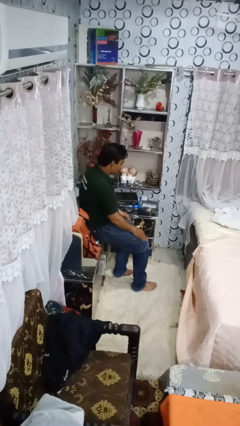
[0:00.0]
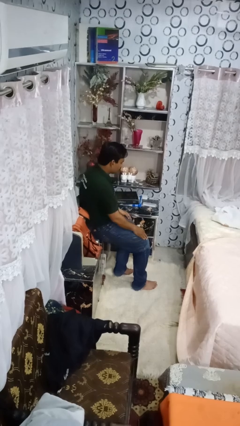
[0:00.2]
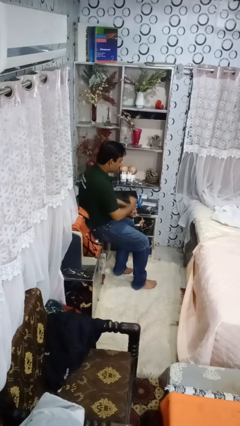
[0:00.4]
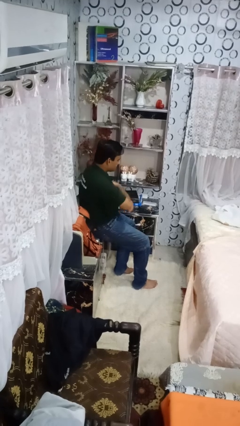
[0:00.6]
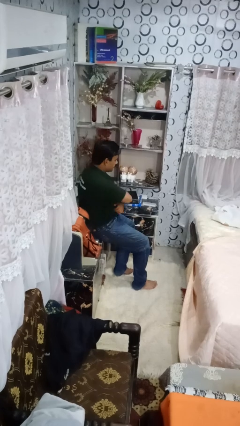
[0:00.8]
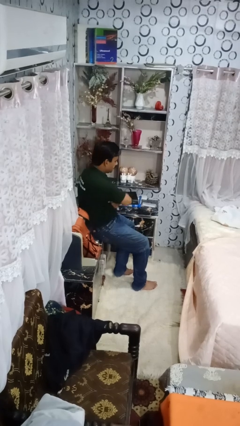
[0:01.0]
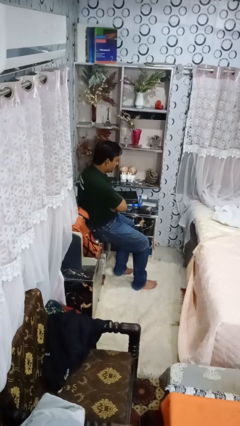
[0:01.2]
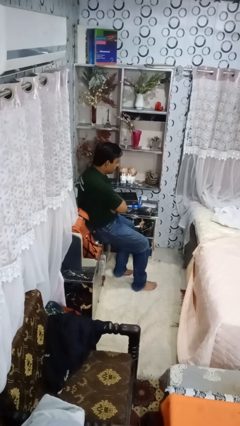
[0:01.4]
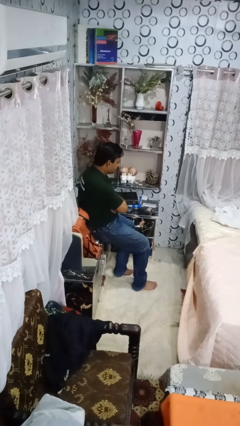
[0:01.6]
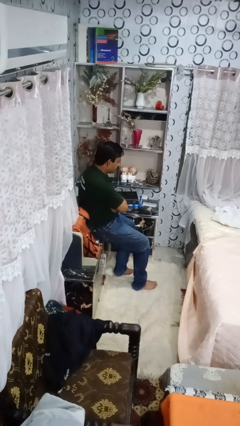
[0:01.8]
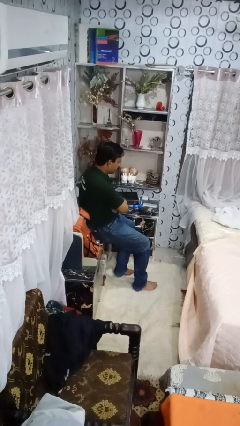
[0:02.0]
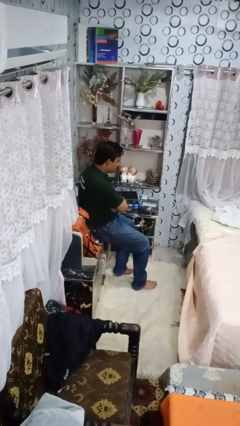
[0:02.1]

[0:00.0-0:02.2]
person crosses arms

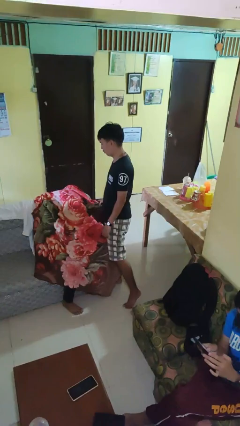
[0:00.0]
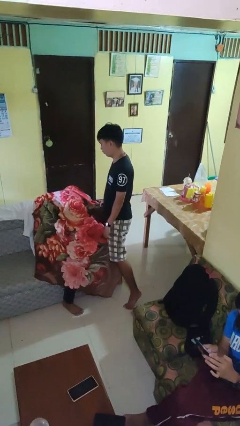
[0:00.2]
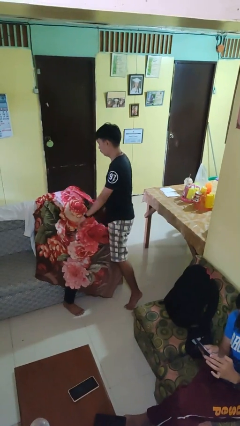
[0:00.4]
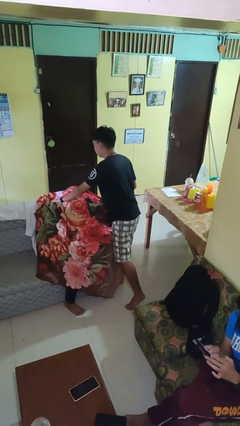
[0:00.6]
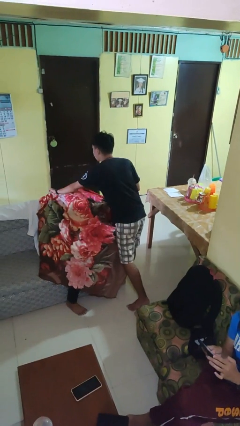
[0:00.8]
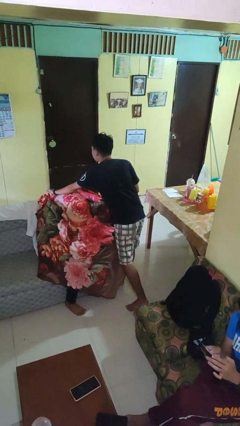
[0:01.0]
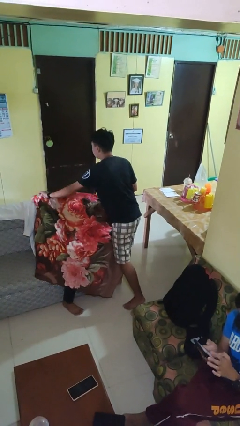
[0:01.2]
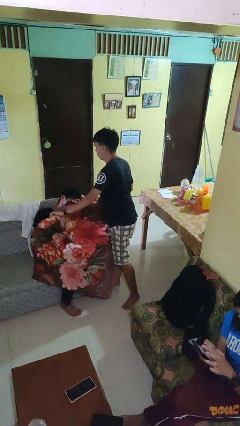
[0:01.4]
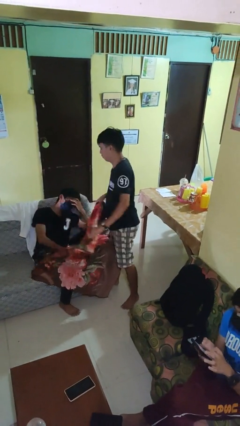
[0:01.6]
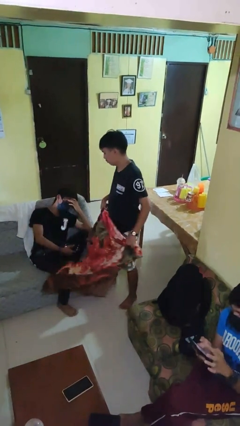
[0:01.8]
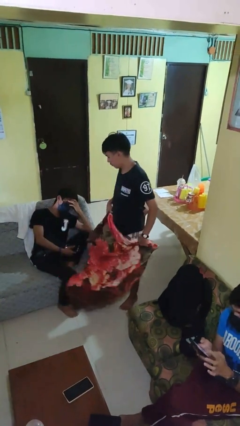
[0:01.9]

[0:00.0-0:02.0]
person uncovers friend with blanket

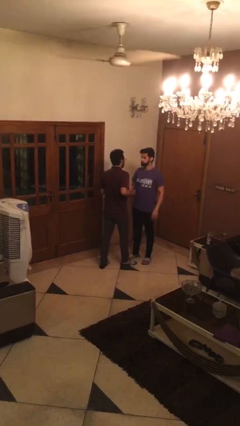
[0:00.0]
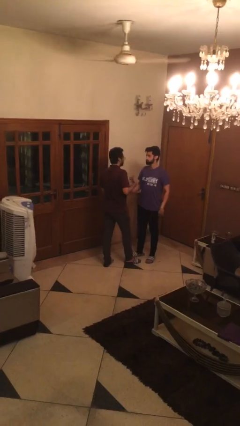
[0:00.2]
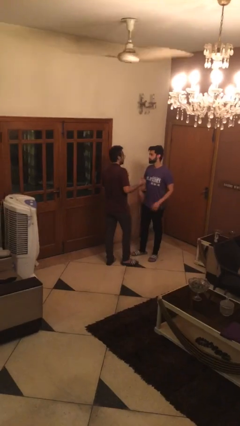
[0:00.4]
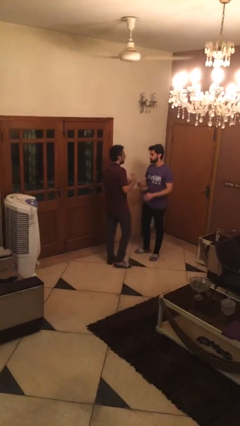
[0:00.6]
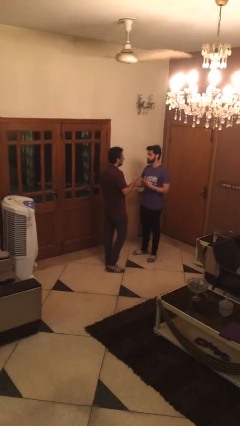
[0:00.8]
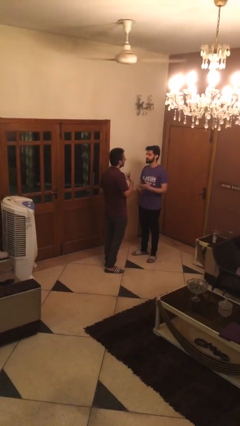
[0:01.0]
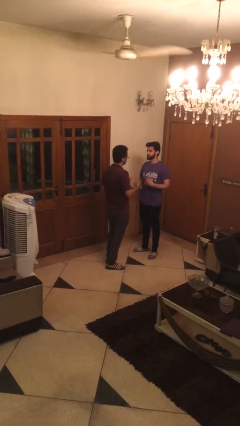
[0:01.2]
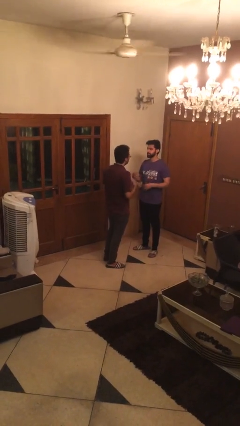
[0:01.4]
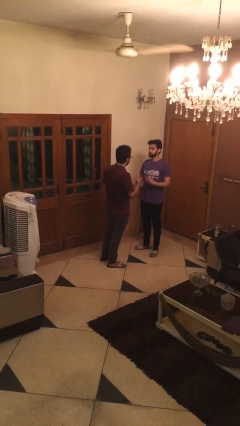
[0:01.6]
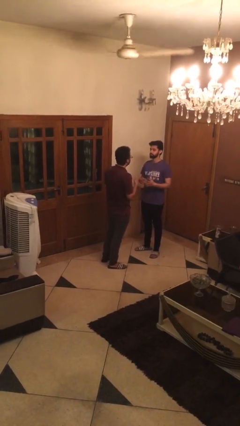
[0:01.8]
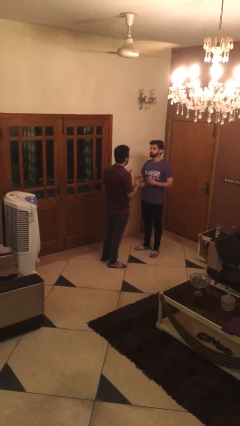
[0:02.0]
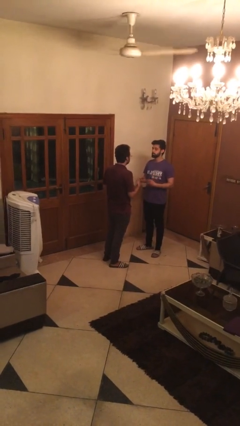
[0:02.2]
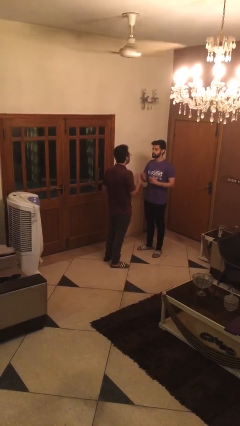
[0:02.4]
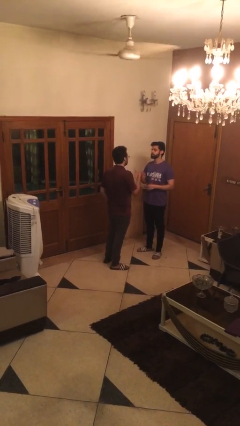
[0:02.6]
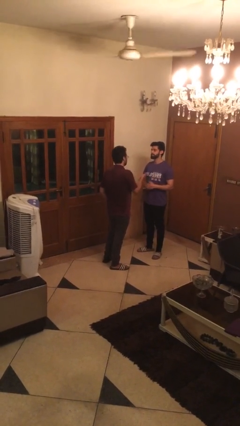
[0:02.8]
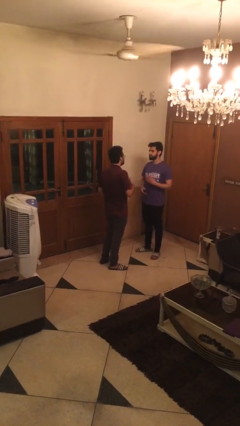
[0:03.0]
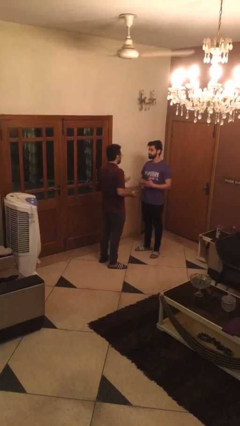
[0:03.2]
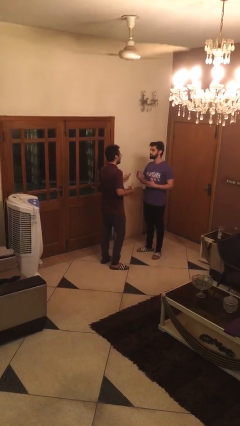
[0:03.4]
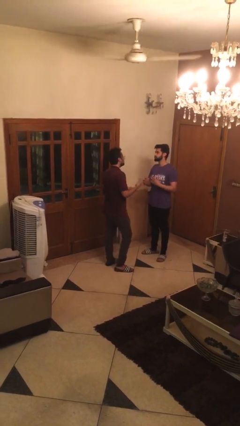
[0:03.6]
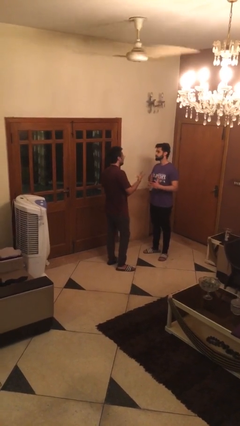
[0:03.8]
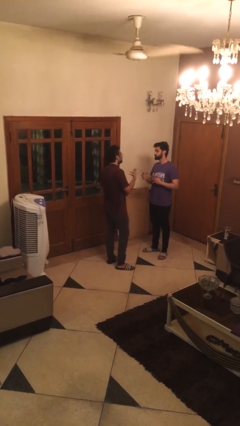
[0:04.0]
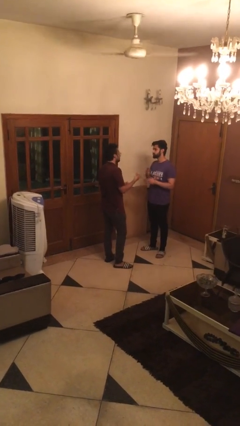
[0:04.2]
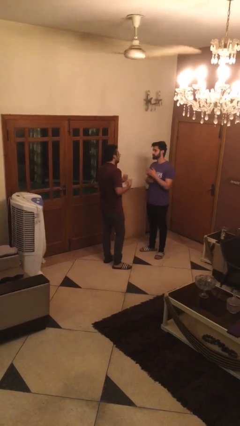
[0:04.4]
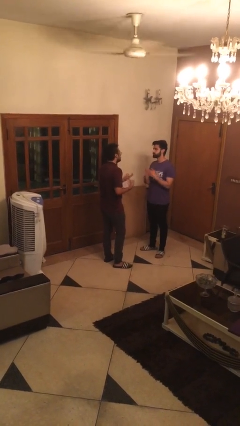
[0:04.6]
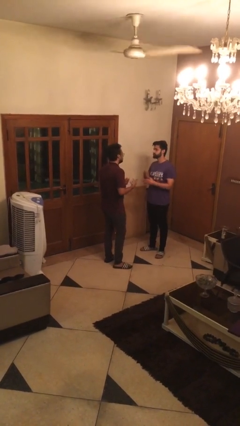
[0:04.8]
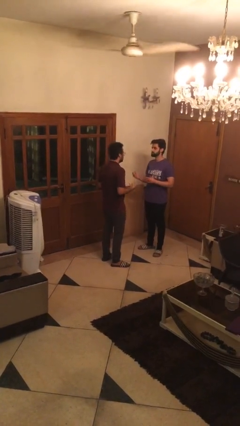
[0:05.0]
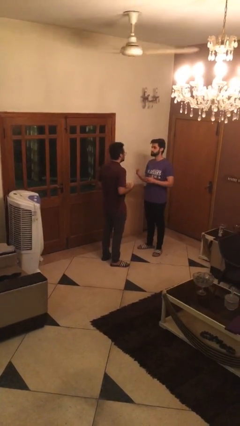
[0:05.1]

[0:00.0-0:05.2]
person talks to person

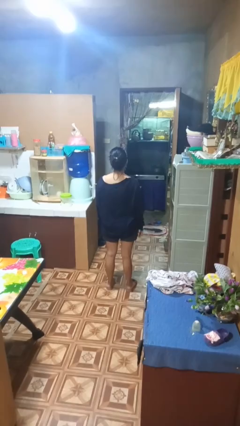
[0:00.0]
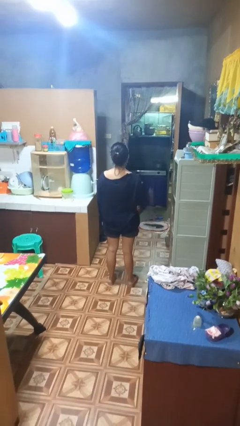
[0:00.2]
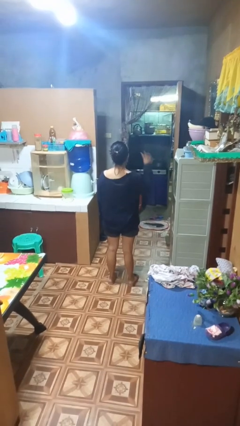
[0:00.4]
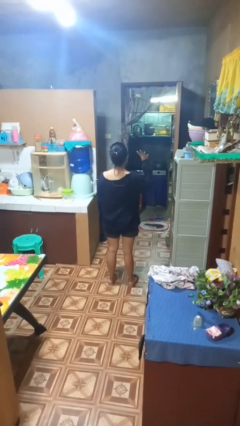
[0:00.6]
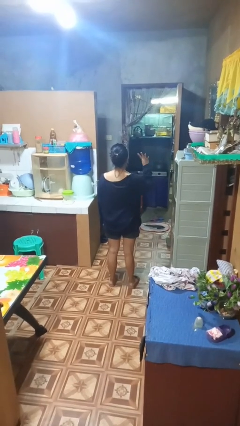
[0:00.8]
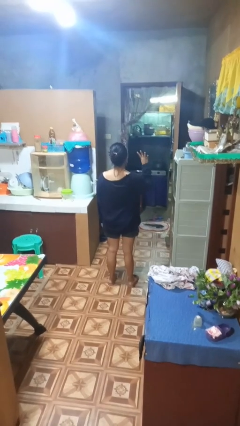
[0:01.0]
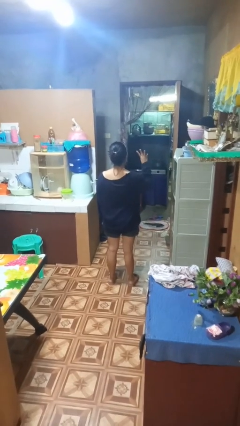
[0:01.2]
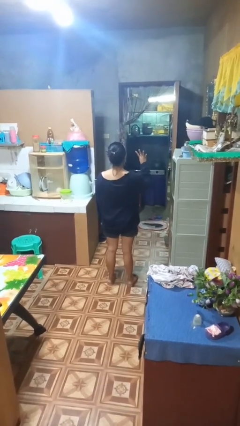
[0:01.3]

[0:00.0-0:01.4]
person gestures number four

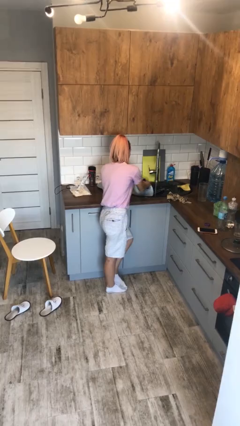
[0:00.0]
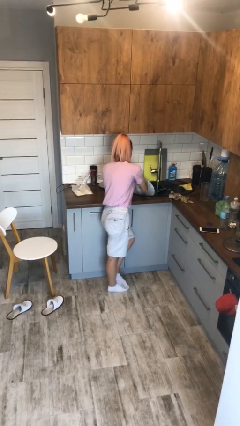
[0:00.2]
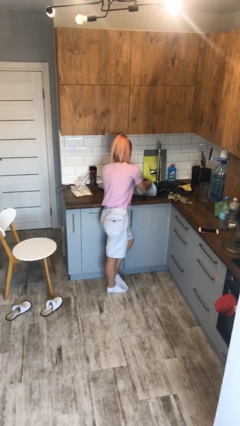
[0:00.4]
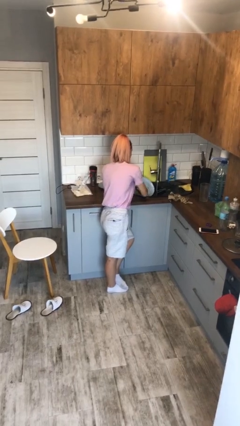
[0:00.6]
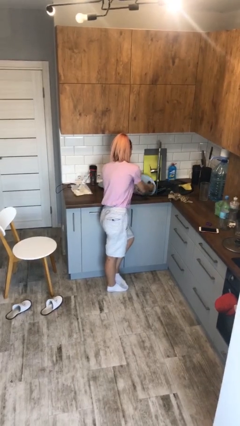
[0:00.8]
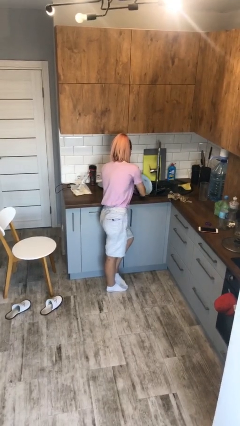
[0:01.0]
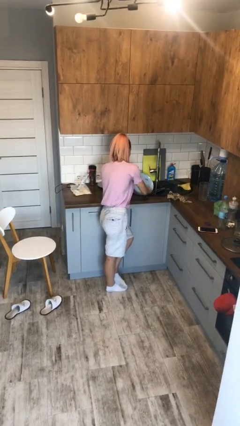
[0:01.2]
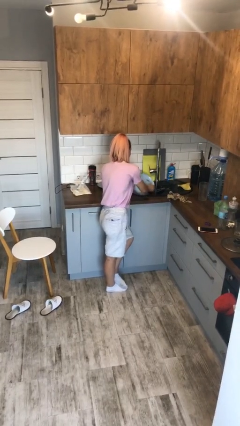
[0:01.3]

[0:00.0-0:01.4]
person washes dish

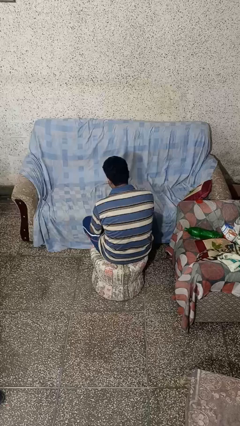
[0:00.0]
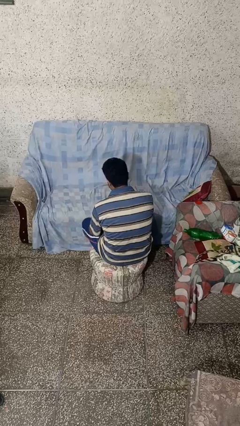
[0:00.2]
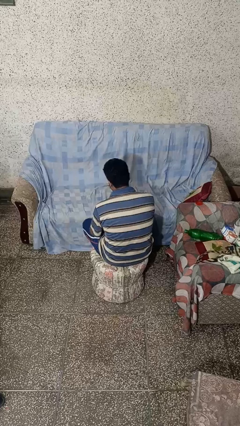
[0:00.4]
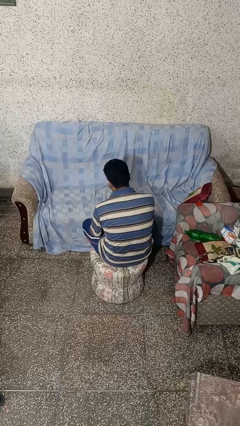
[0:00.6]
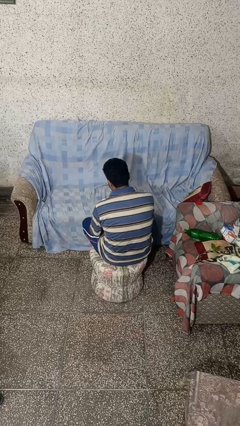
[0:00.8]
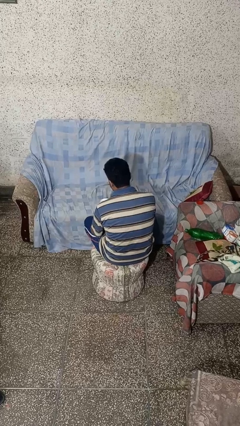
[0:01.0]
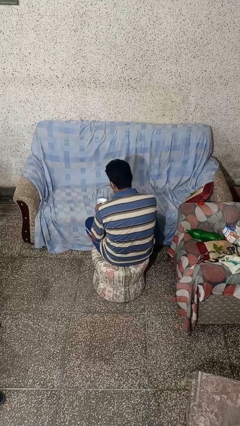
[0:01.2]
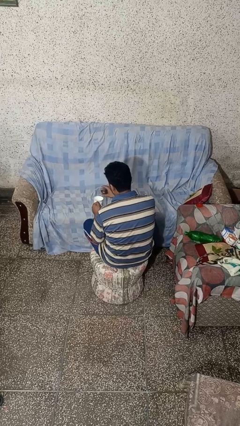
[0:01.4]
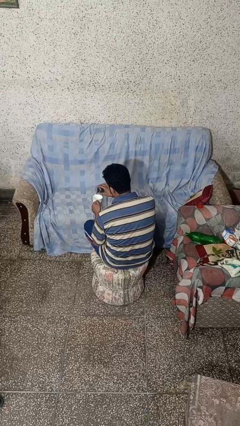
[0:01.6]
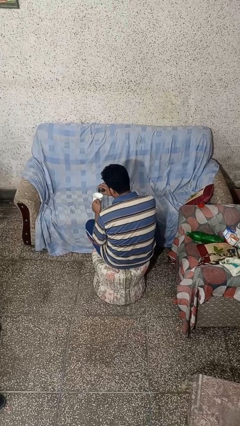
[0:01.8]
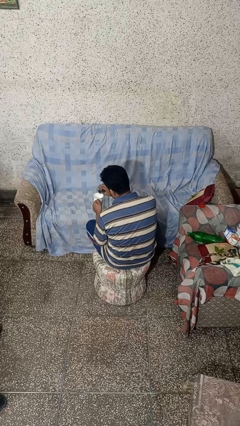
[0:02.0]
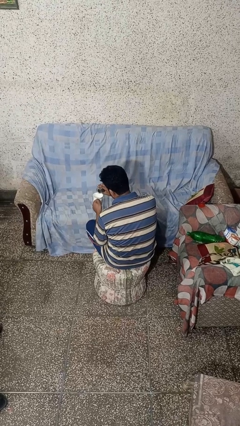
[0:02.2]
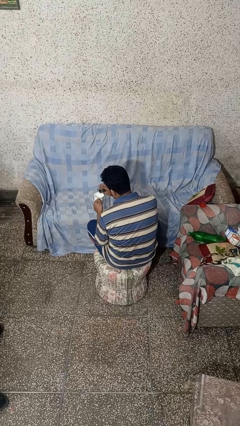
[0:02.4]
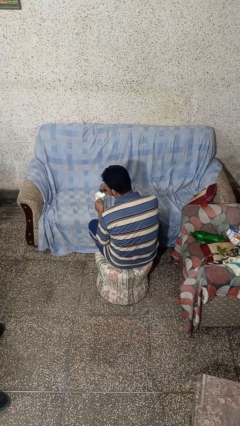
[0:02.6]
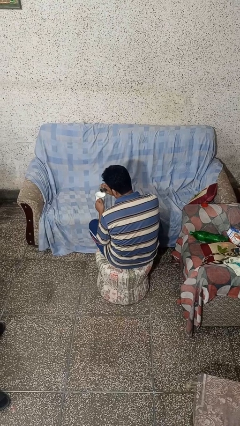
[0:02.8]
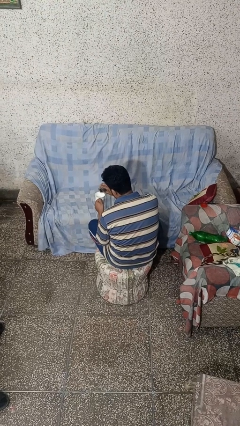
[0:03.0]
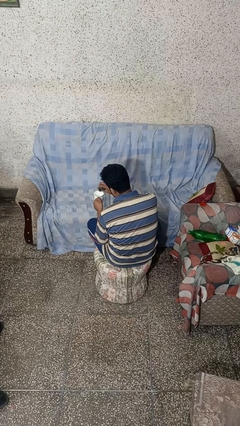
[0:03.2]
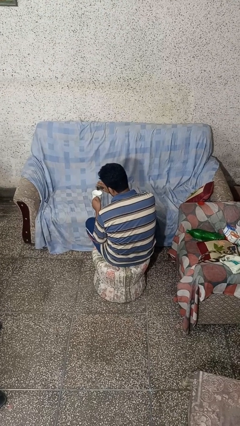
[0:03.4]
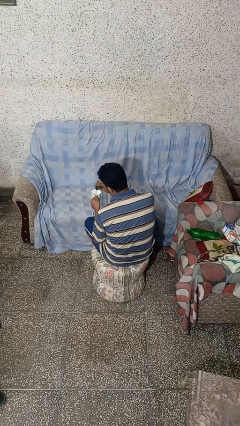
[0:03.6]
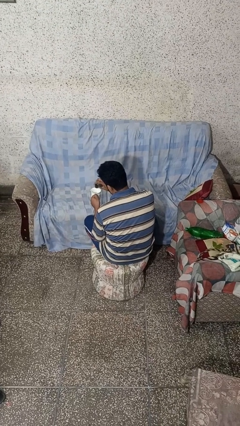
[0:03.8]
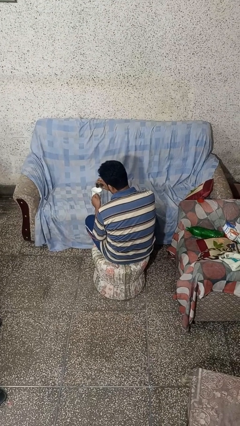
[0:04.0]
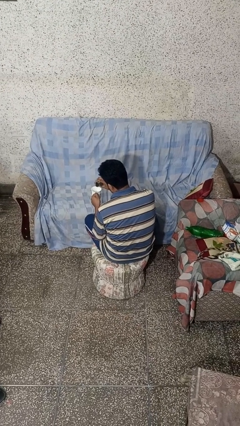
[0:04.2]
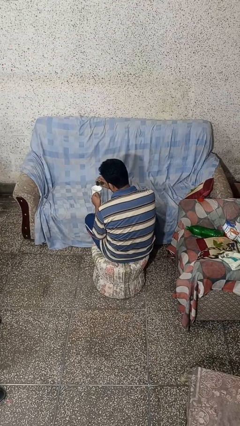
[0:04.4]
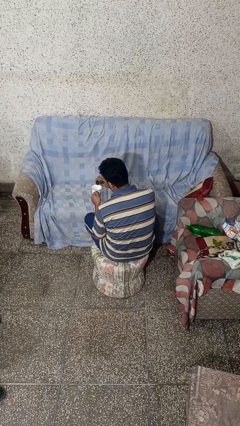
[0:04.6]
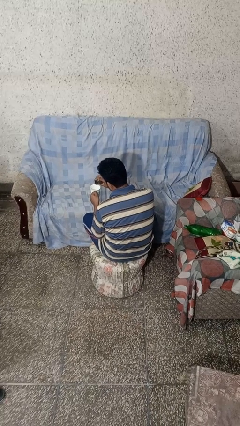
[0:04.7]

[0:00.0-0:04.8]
person pours coffee into mug

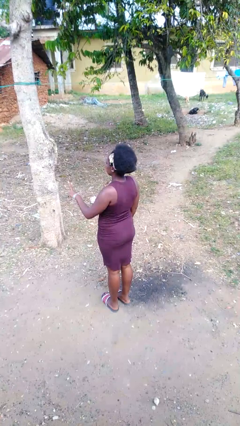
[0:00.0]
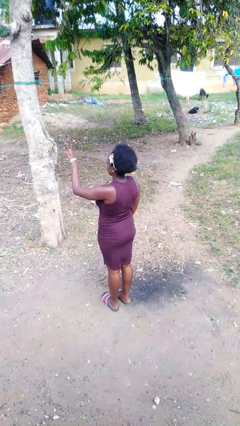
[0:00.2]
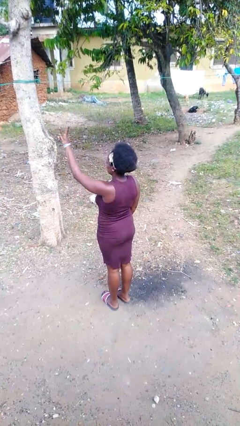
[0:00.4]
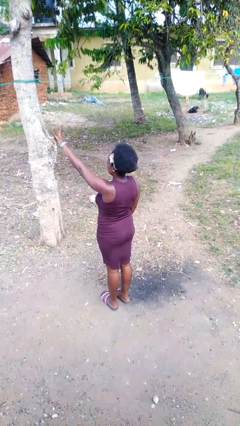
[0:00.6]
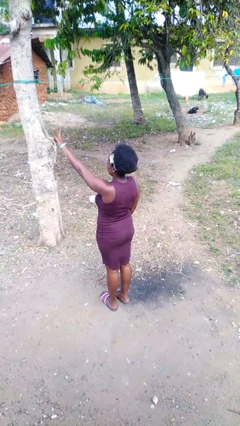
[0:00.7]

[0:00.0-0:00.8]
person gestures number three
